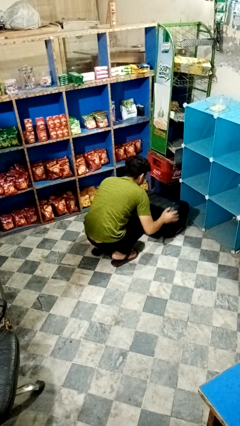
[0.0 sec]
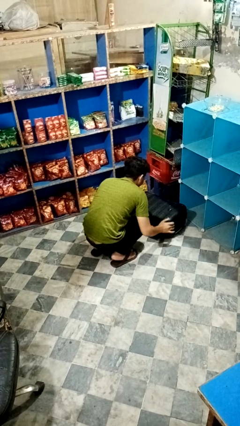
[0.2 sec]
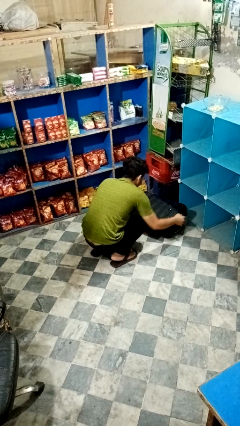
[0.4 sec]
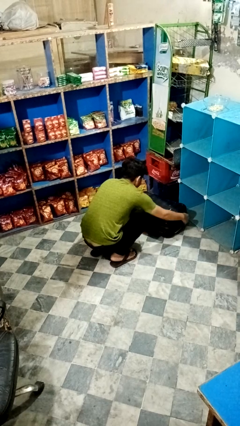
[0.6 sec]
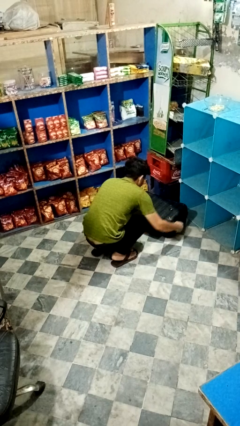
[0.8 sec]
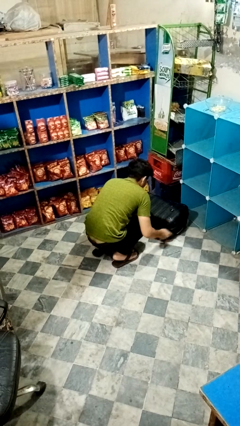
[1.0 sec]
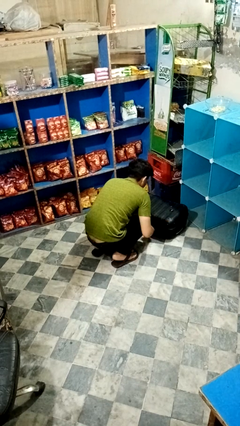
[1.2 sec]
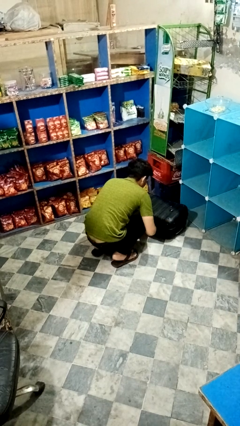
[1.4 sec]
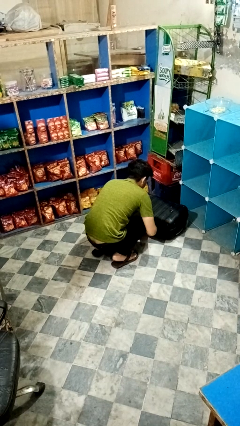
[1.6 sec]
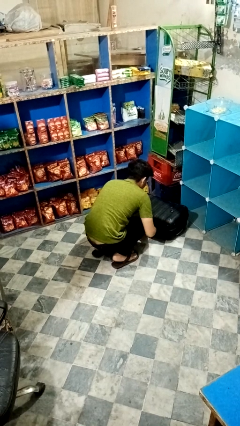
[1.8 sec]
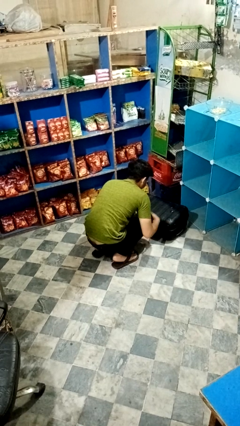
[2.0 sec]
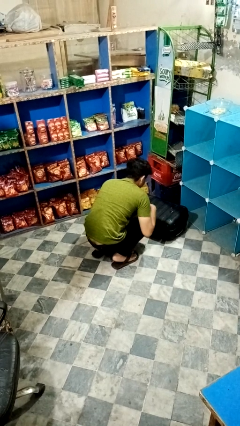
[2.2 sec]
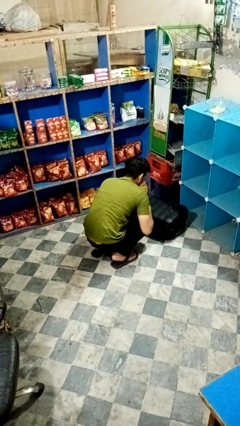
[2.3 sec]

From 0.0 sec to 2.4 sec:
person closes suitcase

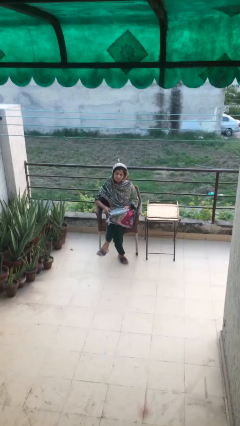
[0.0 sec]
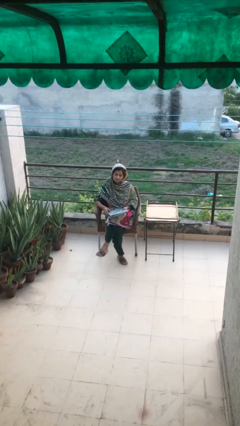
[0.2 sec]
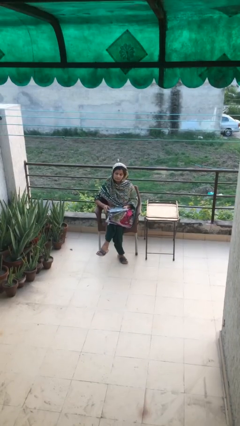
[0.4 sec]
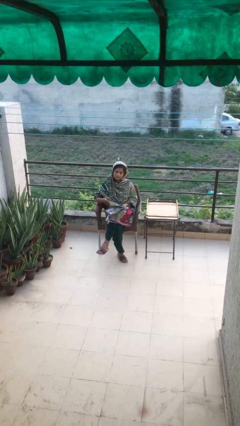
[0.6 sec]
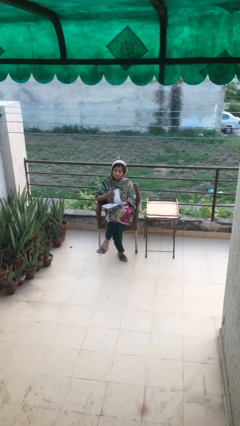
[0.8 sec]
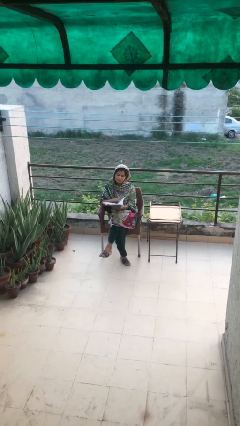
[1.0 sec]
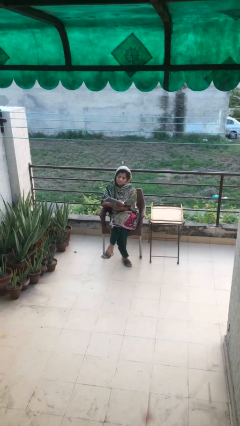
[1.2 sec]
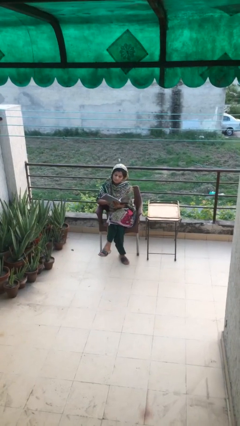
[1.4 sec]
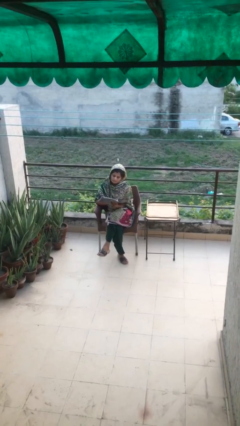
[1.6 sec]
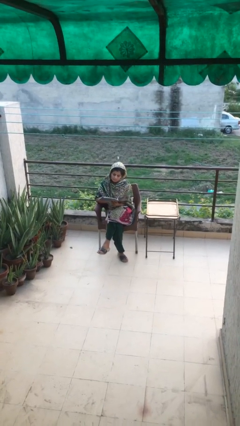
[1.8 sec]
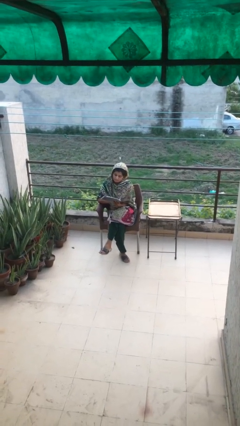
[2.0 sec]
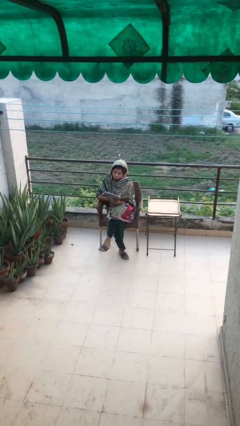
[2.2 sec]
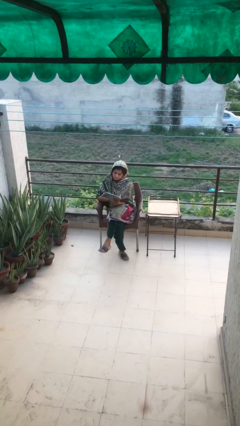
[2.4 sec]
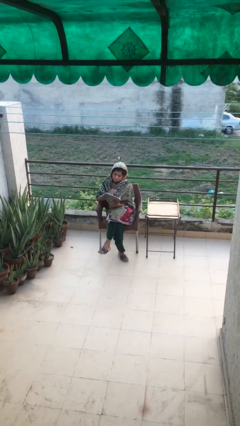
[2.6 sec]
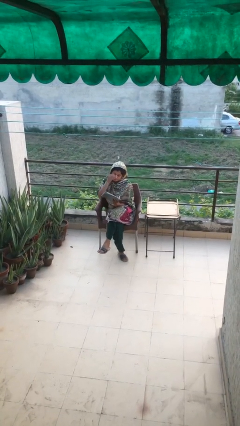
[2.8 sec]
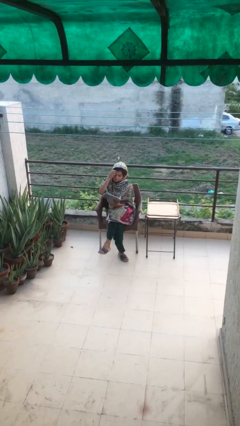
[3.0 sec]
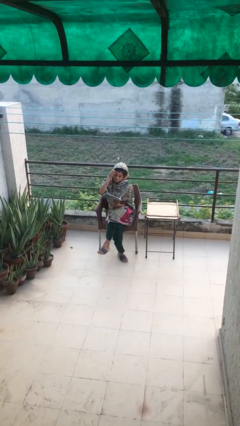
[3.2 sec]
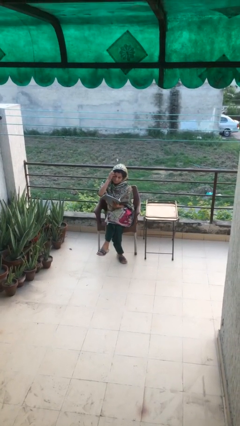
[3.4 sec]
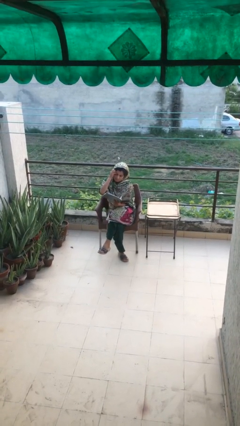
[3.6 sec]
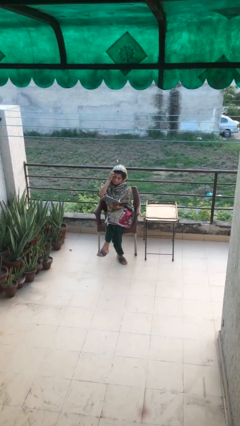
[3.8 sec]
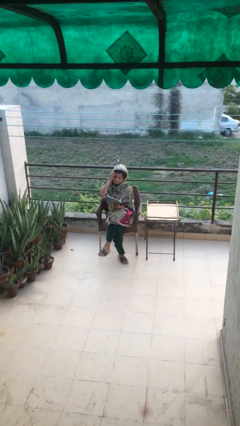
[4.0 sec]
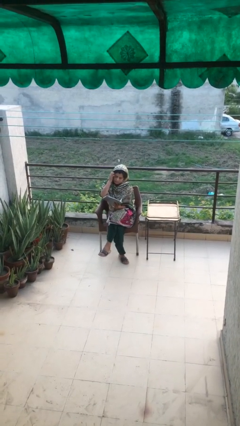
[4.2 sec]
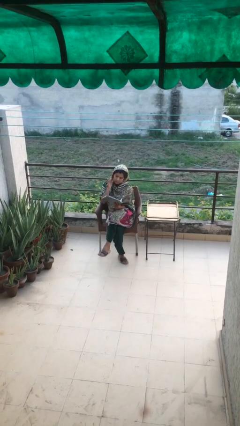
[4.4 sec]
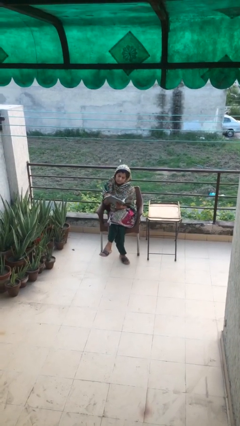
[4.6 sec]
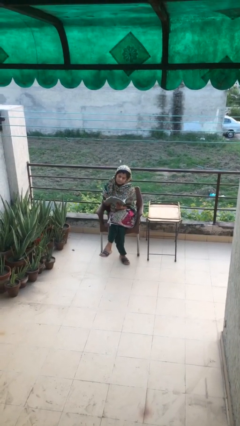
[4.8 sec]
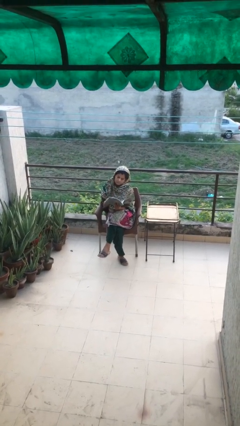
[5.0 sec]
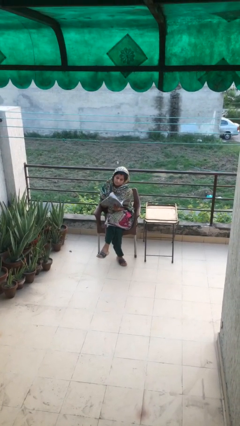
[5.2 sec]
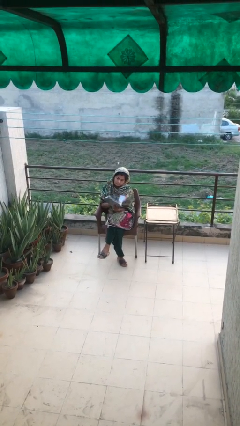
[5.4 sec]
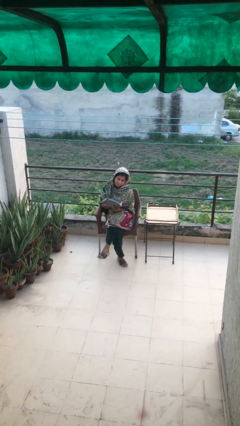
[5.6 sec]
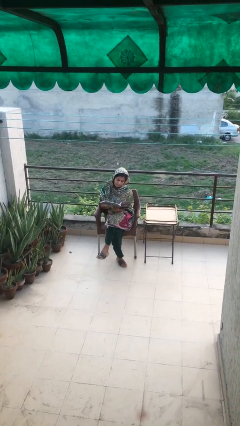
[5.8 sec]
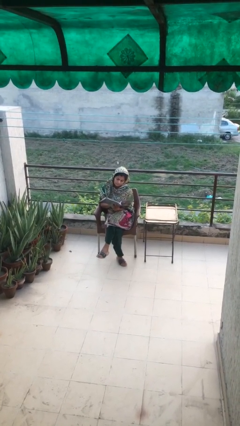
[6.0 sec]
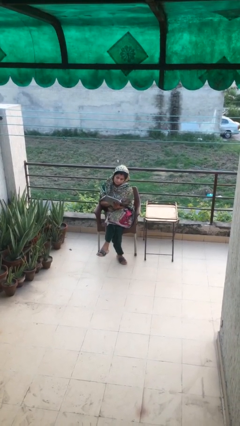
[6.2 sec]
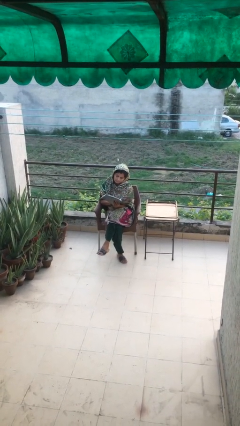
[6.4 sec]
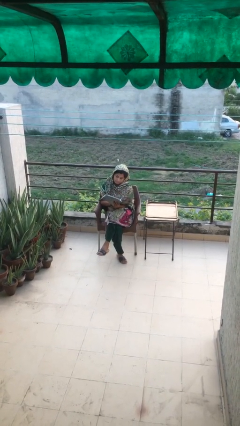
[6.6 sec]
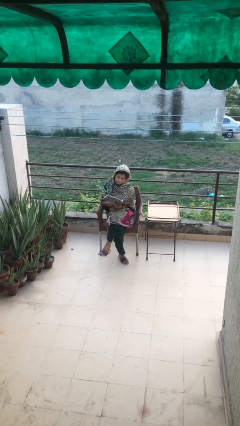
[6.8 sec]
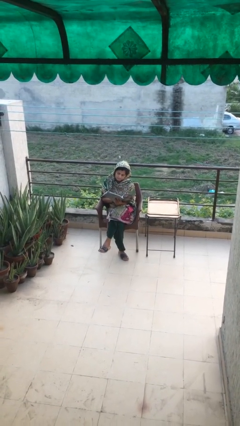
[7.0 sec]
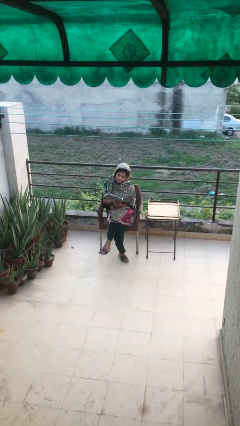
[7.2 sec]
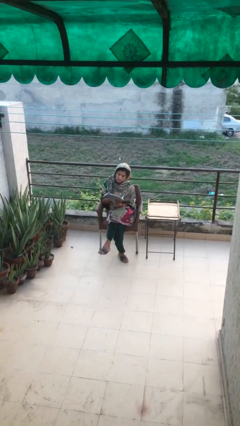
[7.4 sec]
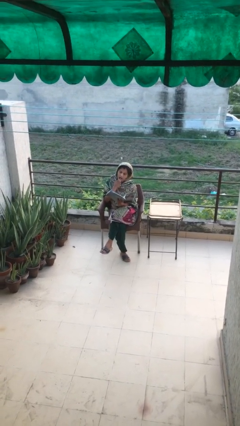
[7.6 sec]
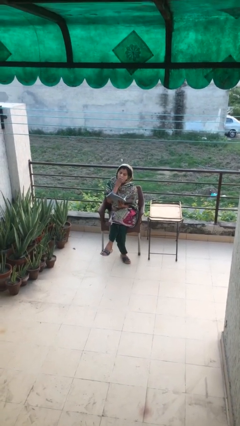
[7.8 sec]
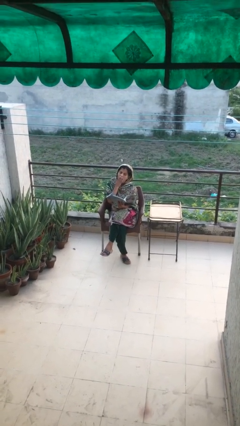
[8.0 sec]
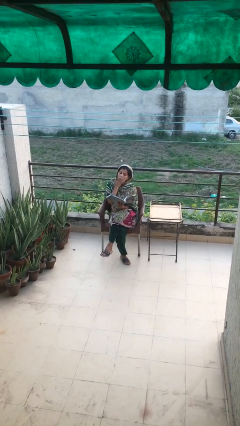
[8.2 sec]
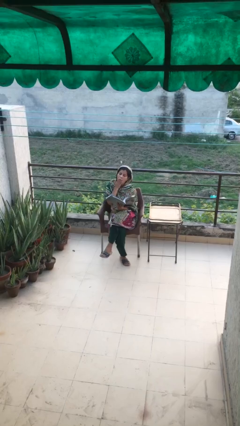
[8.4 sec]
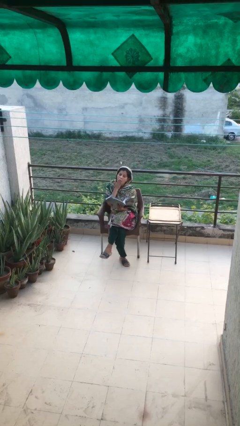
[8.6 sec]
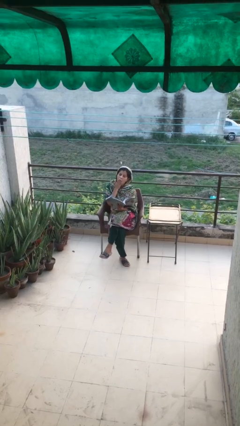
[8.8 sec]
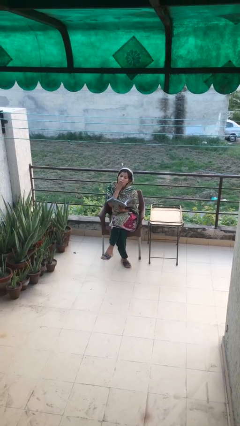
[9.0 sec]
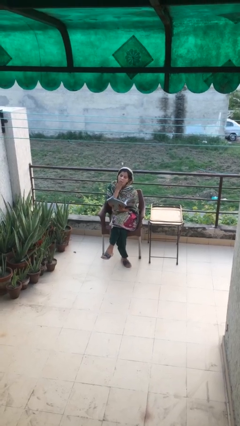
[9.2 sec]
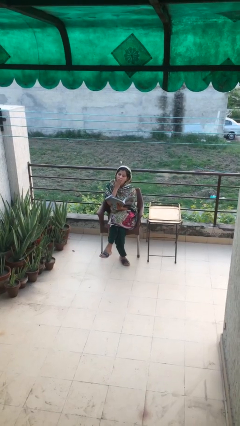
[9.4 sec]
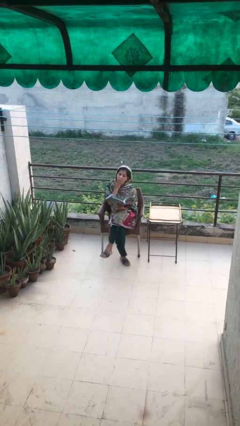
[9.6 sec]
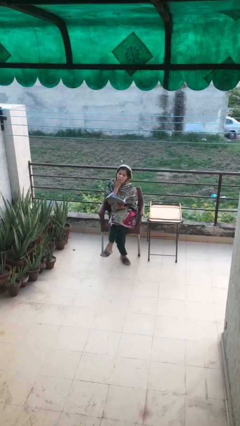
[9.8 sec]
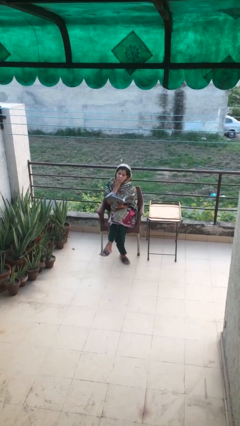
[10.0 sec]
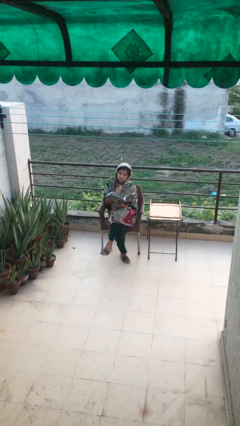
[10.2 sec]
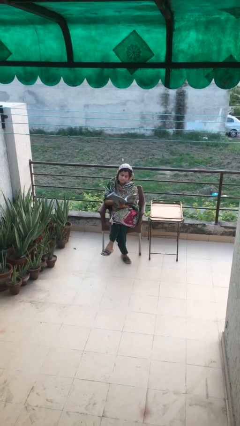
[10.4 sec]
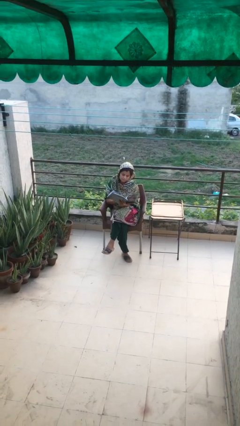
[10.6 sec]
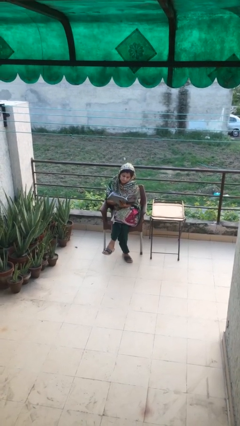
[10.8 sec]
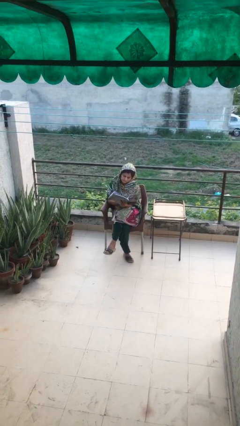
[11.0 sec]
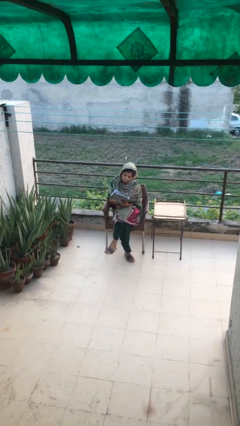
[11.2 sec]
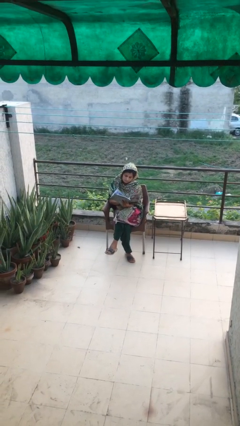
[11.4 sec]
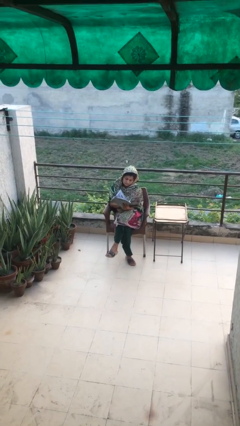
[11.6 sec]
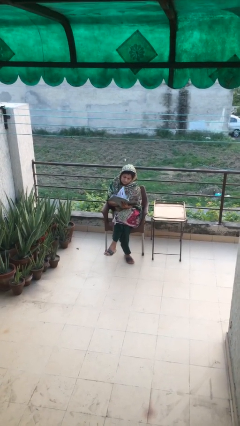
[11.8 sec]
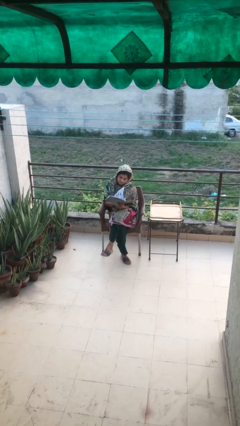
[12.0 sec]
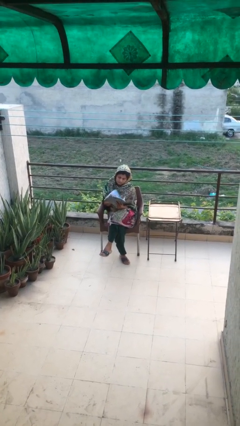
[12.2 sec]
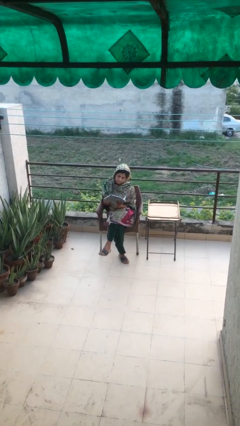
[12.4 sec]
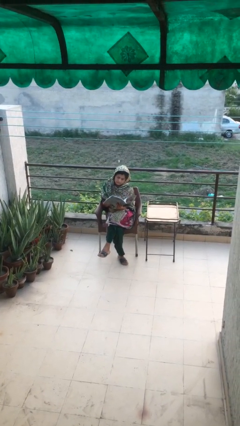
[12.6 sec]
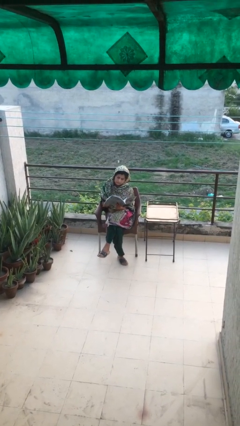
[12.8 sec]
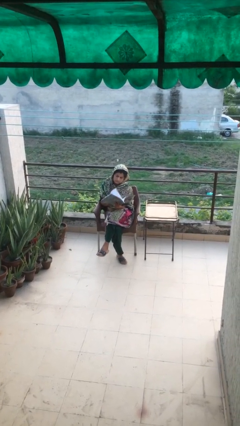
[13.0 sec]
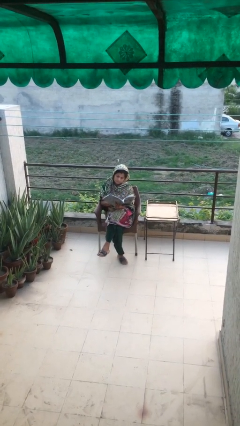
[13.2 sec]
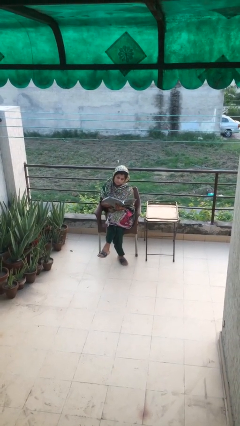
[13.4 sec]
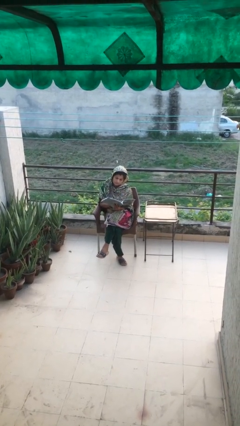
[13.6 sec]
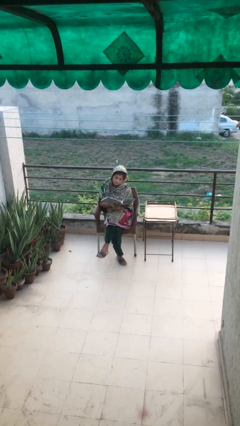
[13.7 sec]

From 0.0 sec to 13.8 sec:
person reads document

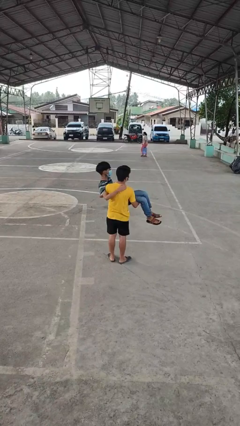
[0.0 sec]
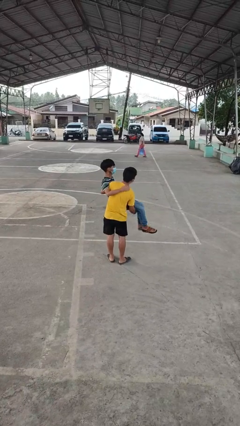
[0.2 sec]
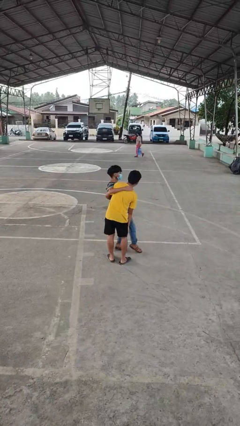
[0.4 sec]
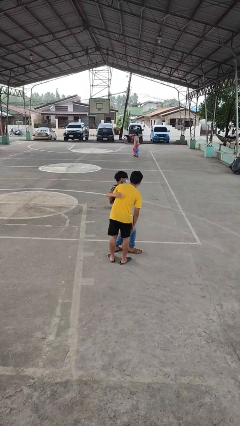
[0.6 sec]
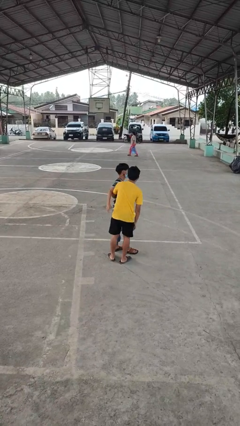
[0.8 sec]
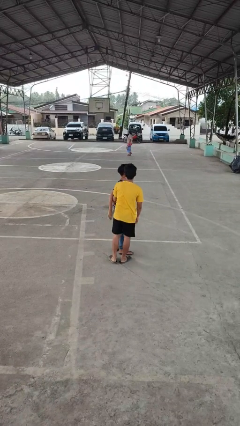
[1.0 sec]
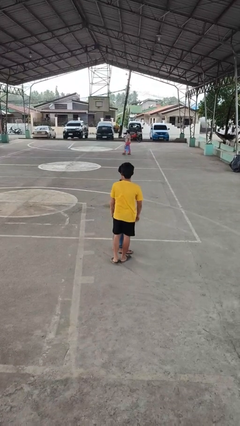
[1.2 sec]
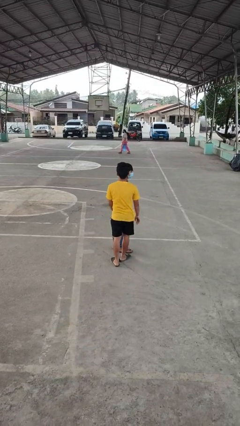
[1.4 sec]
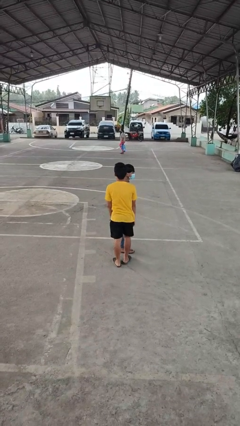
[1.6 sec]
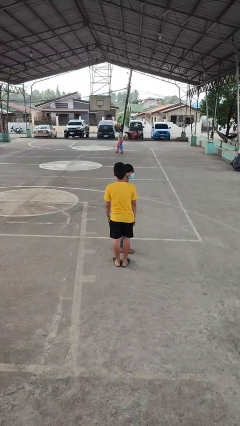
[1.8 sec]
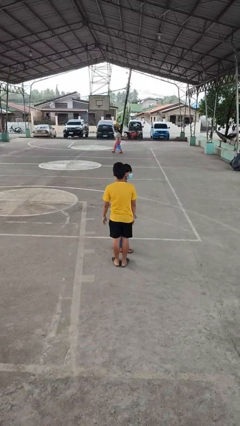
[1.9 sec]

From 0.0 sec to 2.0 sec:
person puts down person
